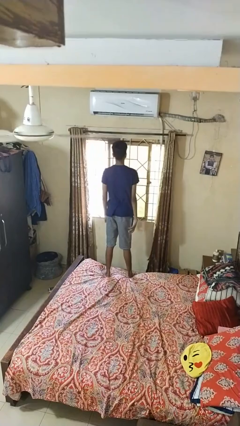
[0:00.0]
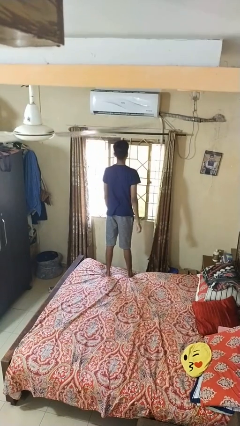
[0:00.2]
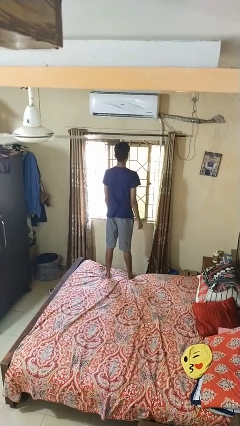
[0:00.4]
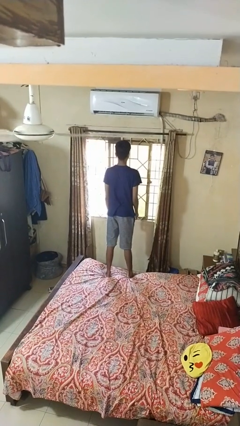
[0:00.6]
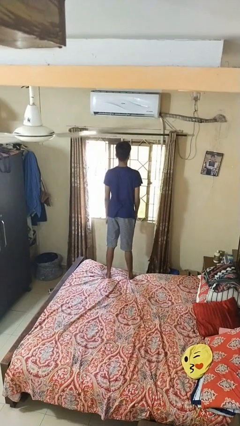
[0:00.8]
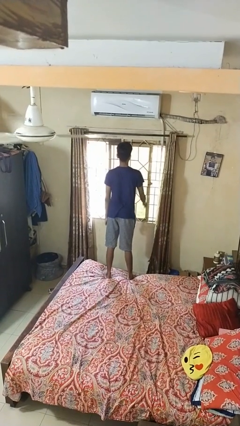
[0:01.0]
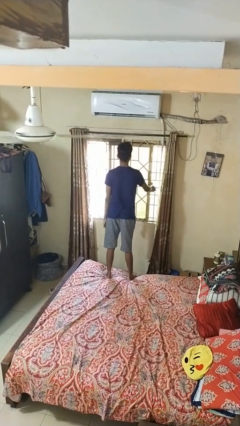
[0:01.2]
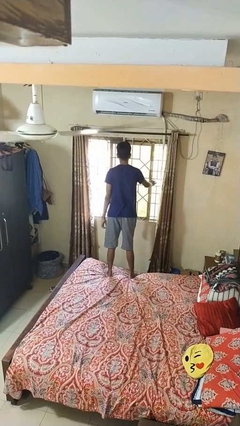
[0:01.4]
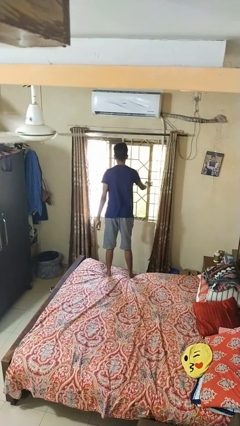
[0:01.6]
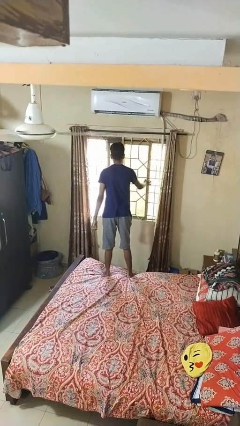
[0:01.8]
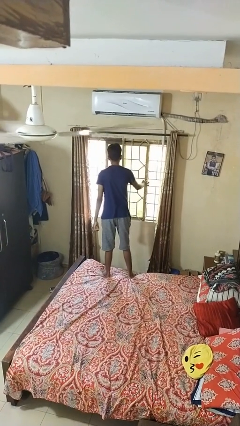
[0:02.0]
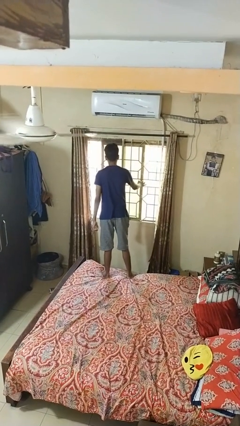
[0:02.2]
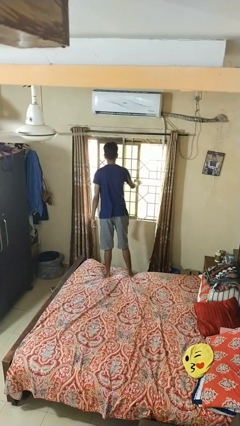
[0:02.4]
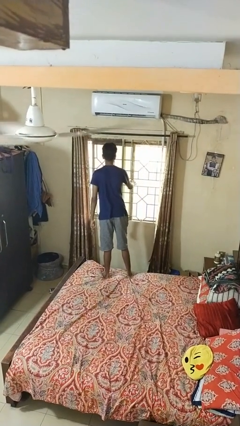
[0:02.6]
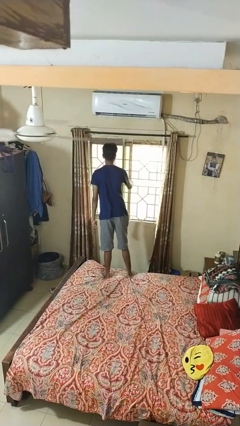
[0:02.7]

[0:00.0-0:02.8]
person closes home window

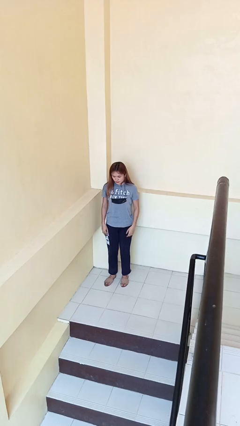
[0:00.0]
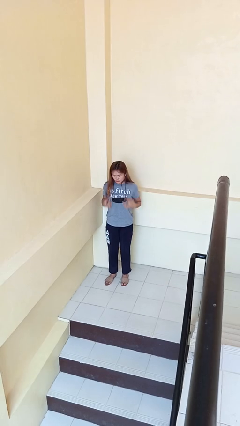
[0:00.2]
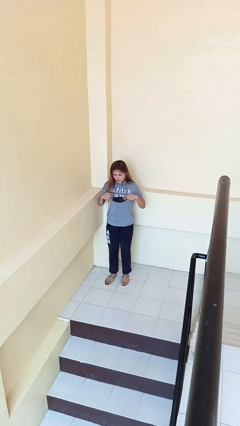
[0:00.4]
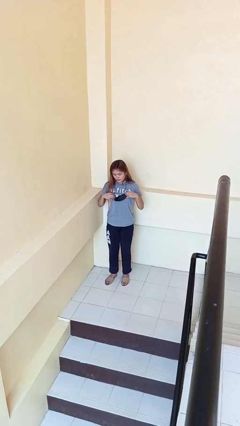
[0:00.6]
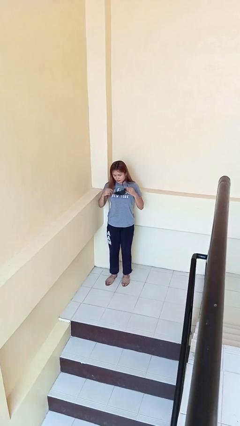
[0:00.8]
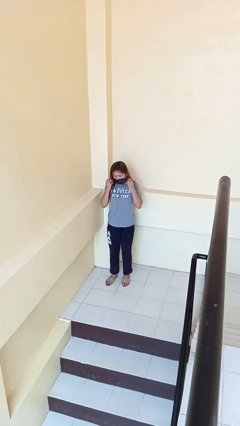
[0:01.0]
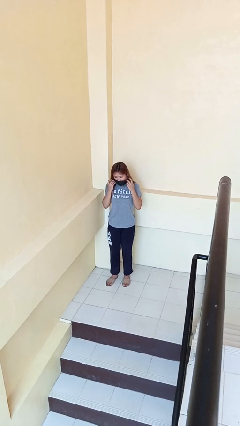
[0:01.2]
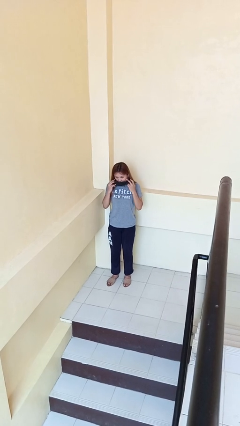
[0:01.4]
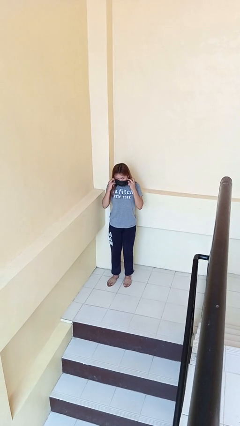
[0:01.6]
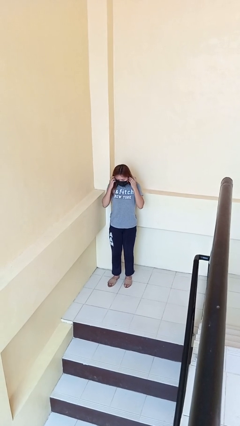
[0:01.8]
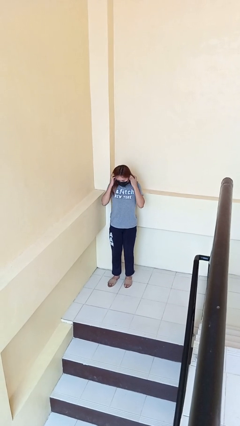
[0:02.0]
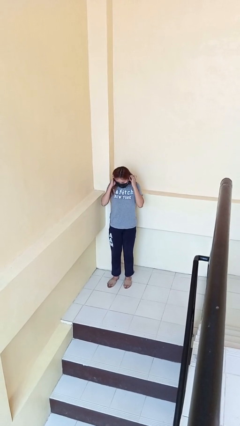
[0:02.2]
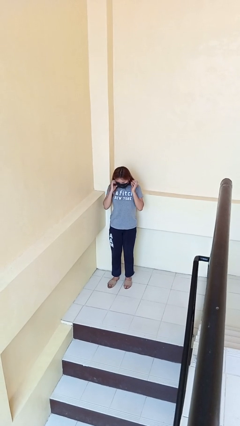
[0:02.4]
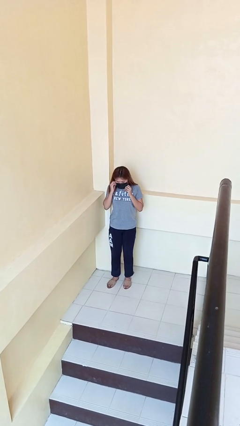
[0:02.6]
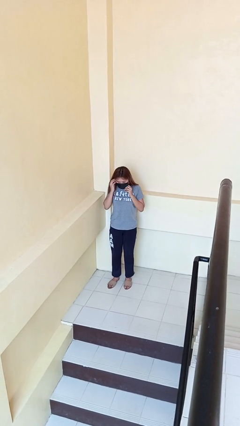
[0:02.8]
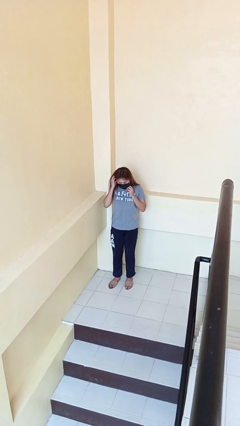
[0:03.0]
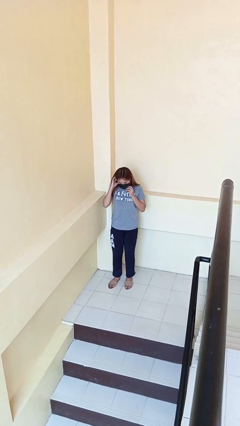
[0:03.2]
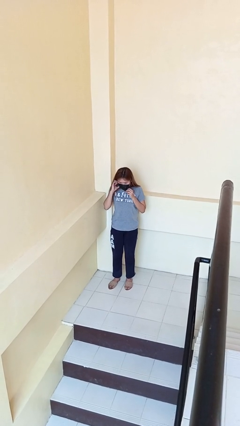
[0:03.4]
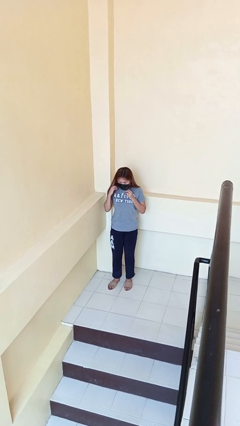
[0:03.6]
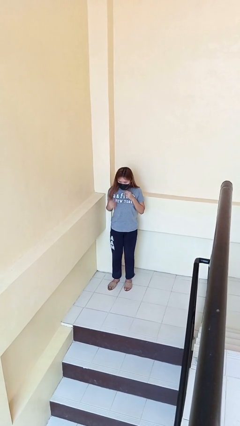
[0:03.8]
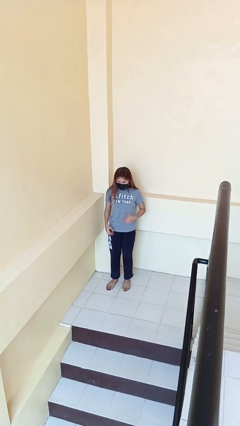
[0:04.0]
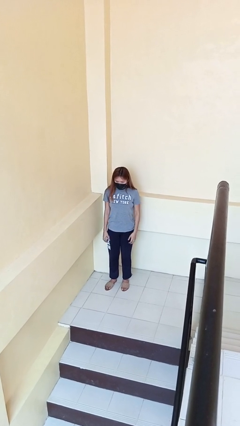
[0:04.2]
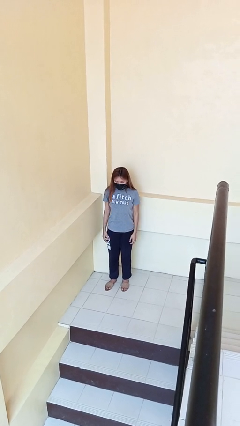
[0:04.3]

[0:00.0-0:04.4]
person puts on facemask

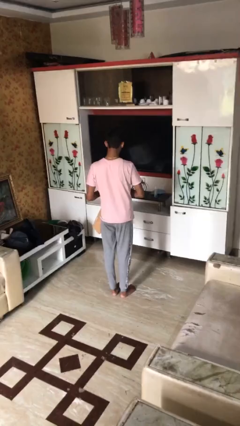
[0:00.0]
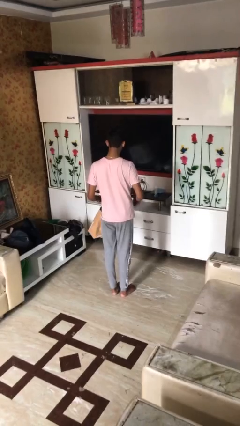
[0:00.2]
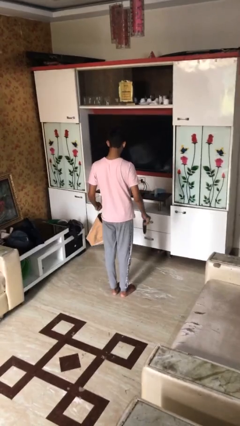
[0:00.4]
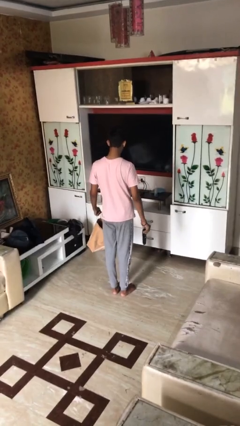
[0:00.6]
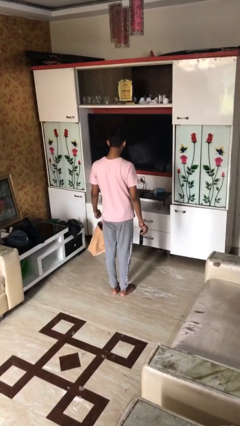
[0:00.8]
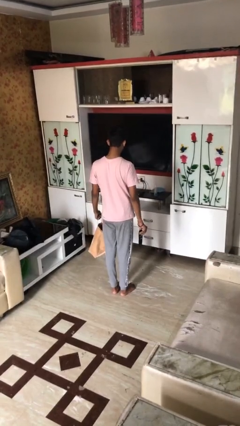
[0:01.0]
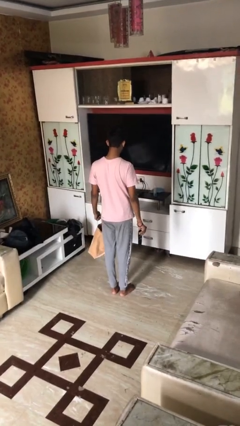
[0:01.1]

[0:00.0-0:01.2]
person takes object from bag

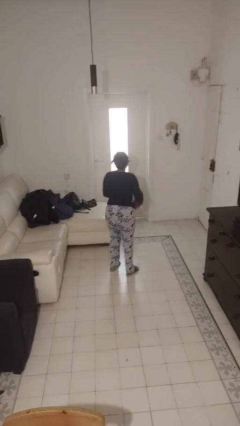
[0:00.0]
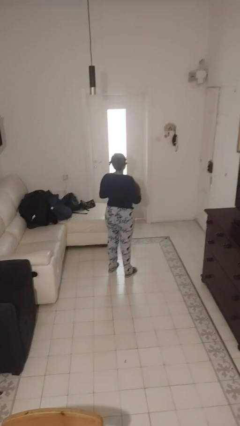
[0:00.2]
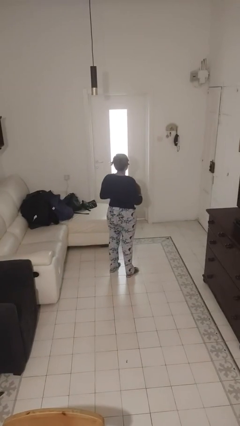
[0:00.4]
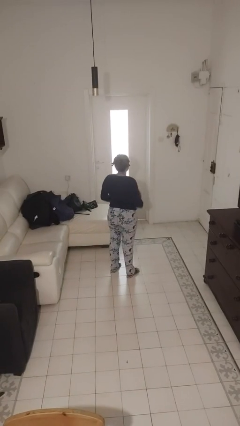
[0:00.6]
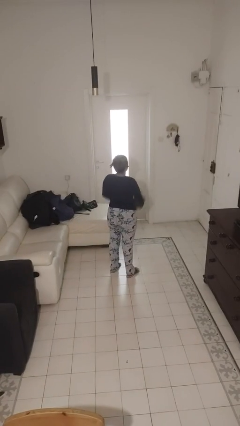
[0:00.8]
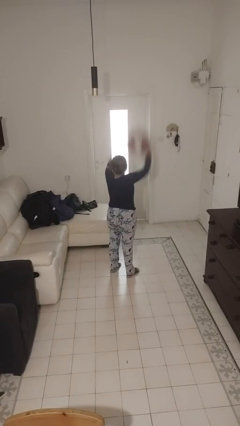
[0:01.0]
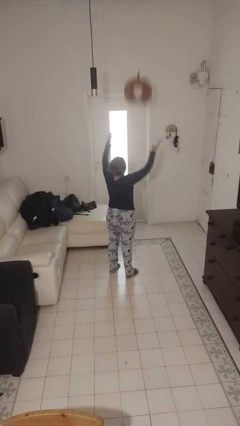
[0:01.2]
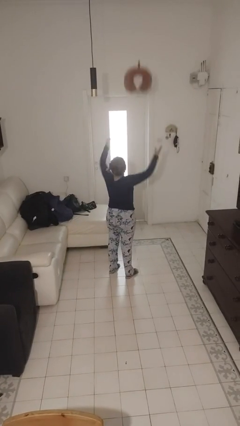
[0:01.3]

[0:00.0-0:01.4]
person drops object

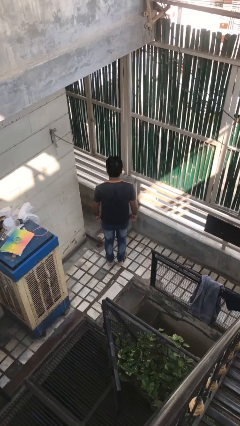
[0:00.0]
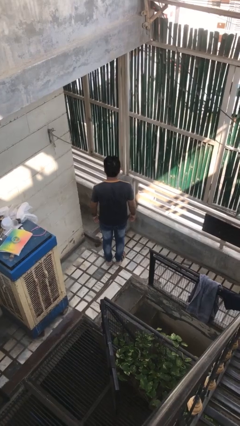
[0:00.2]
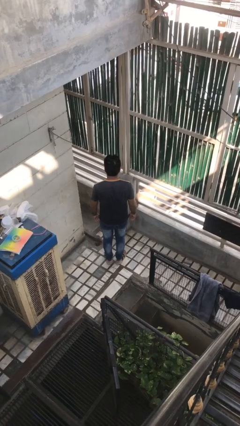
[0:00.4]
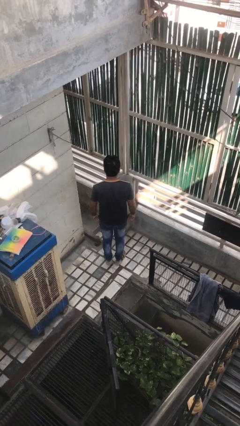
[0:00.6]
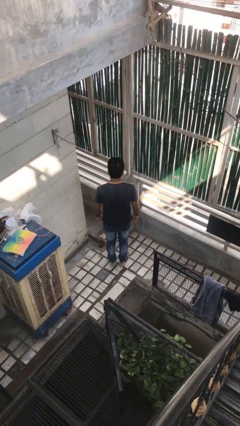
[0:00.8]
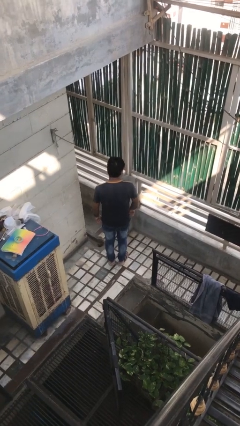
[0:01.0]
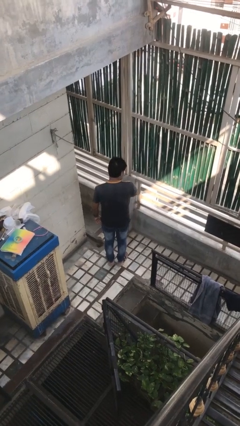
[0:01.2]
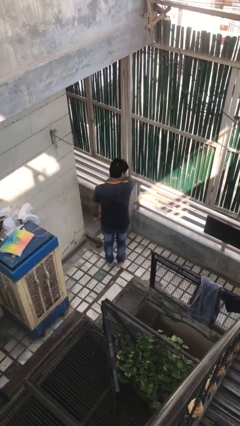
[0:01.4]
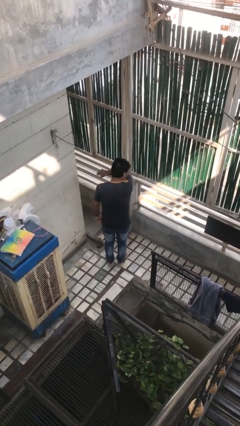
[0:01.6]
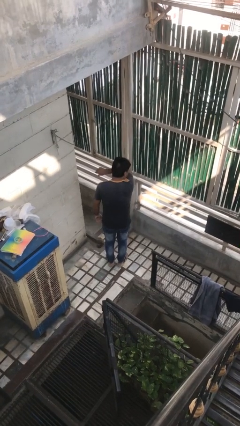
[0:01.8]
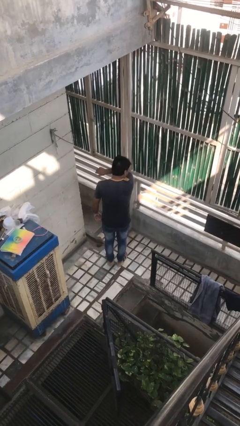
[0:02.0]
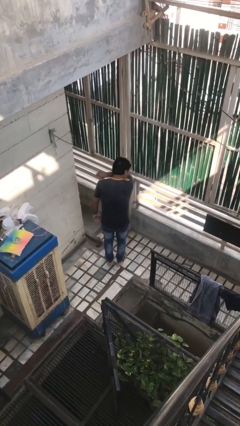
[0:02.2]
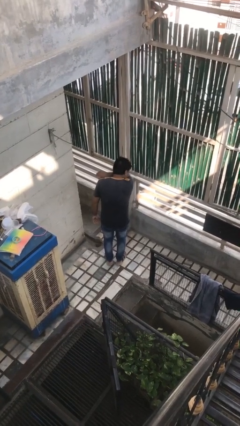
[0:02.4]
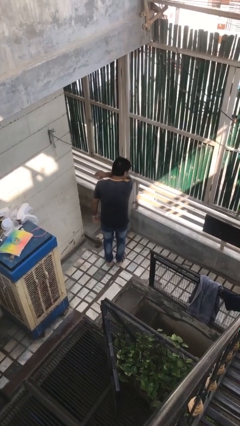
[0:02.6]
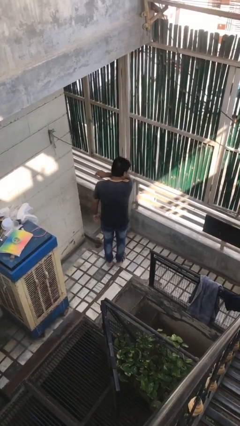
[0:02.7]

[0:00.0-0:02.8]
person sneezes into arm

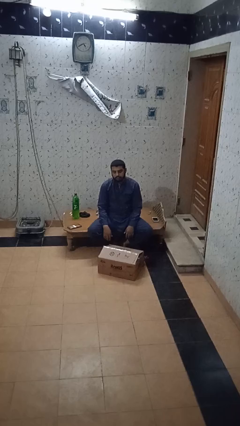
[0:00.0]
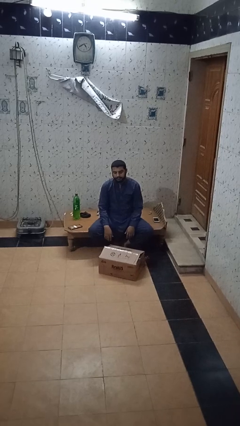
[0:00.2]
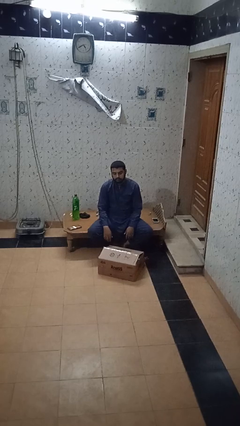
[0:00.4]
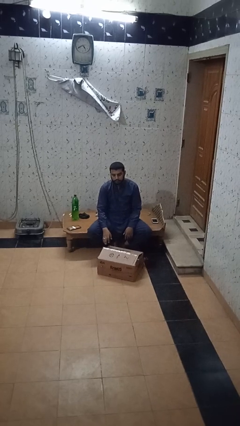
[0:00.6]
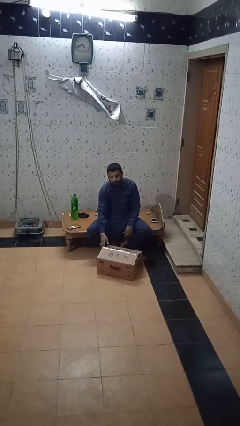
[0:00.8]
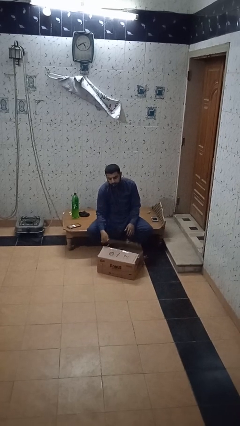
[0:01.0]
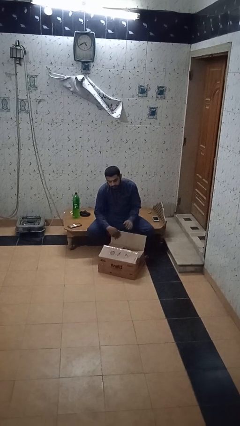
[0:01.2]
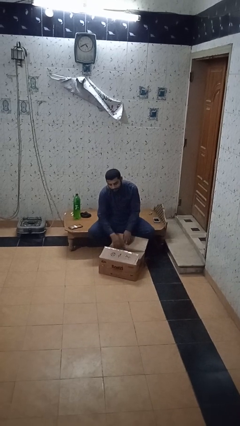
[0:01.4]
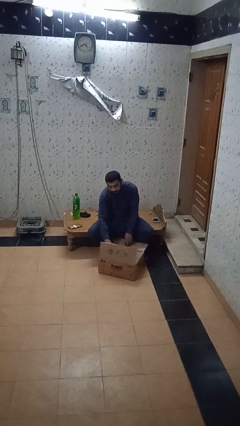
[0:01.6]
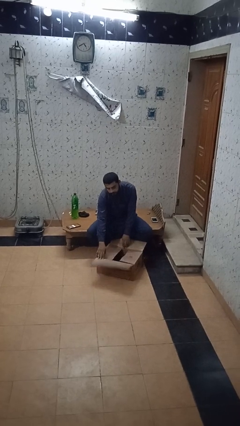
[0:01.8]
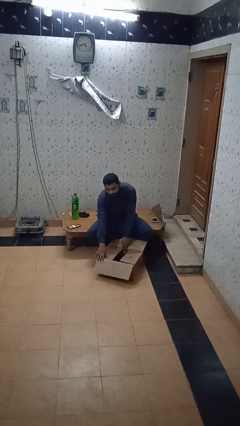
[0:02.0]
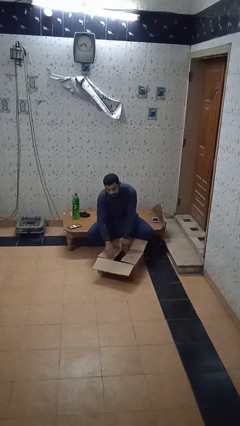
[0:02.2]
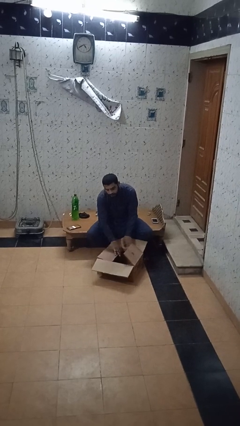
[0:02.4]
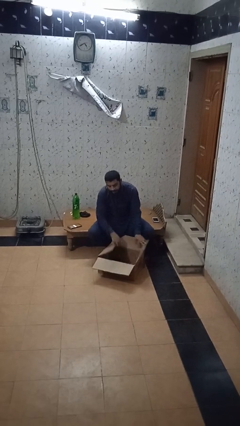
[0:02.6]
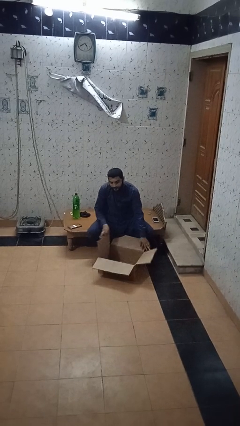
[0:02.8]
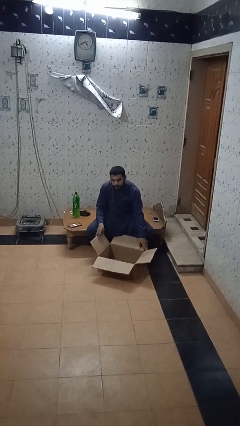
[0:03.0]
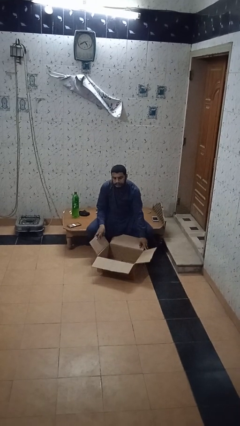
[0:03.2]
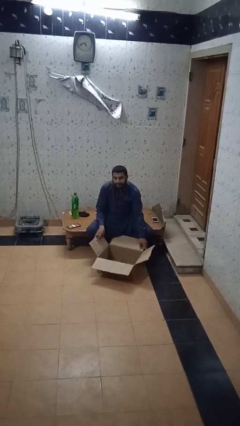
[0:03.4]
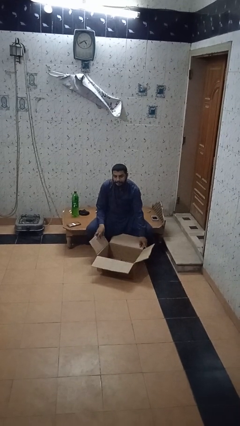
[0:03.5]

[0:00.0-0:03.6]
person opens box

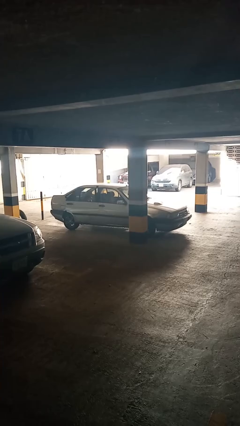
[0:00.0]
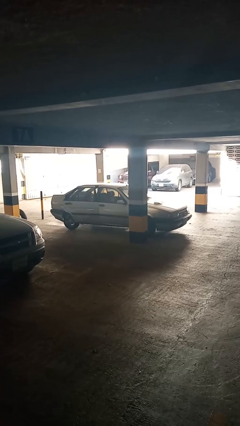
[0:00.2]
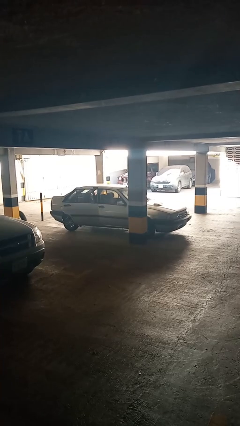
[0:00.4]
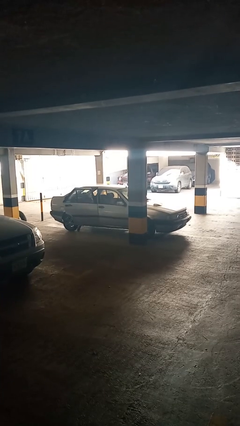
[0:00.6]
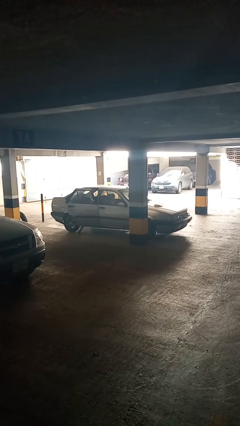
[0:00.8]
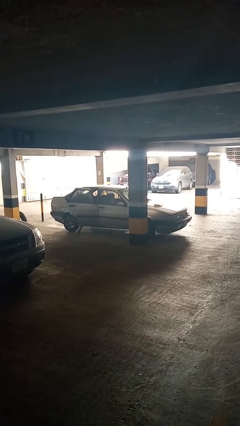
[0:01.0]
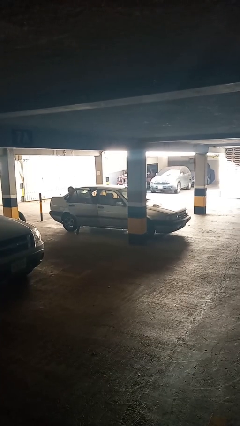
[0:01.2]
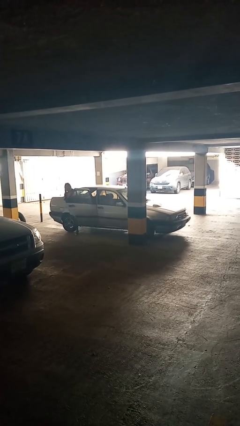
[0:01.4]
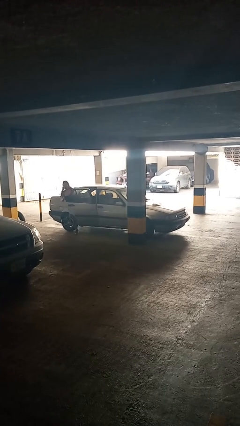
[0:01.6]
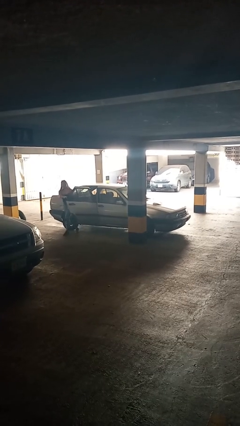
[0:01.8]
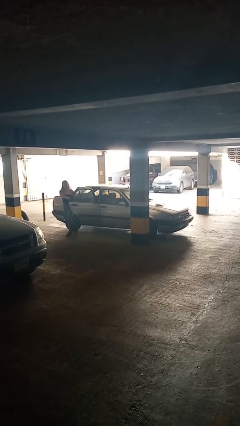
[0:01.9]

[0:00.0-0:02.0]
car drops off person
